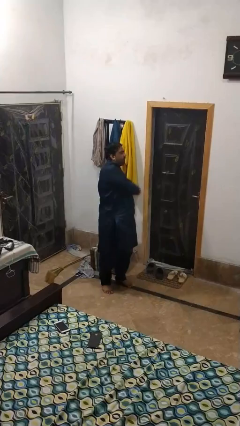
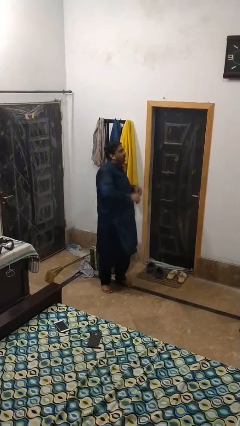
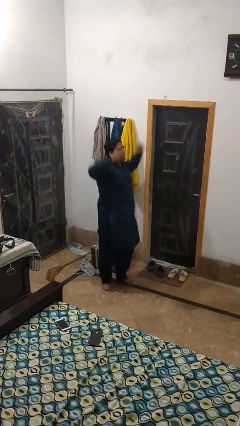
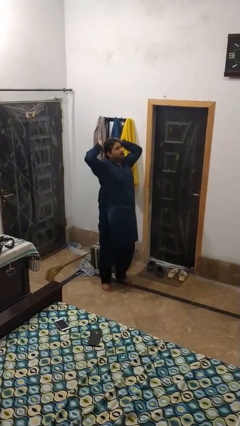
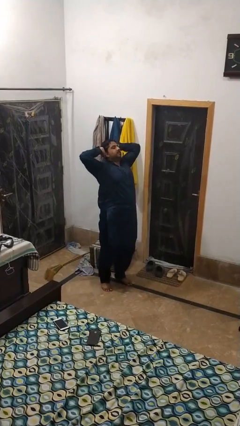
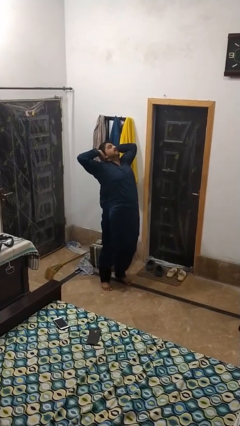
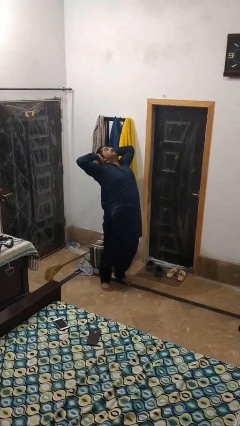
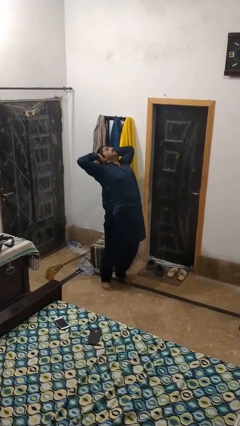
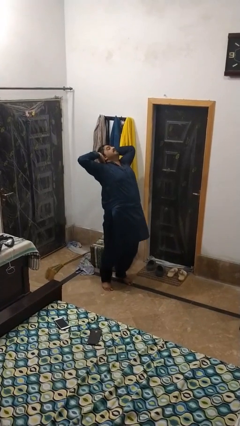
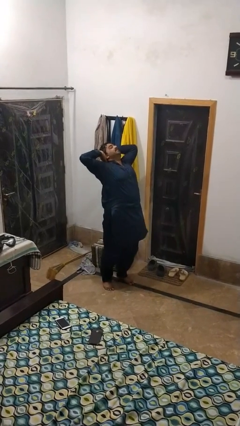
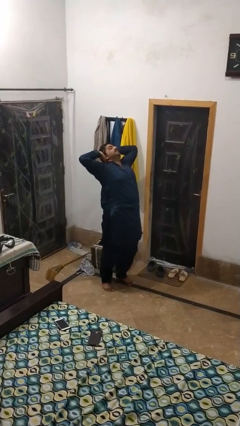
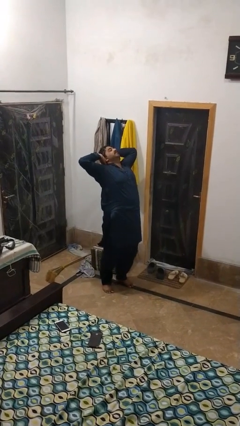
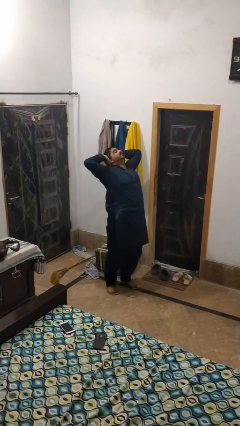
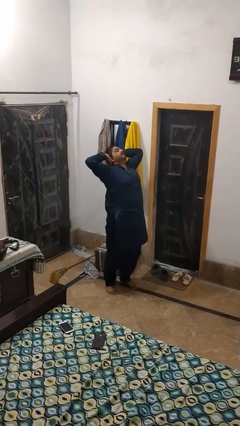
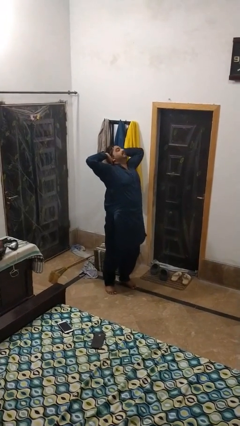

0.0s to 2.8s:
person stretches arms over head

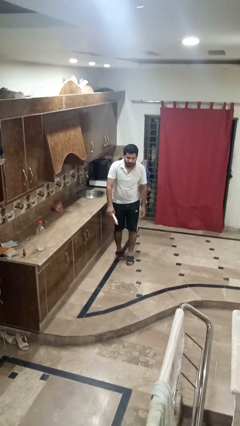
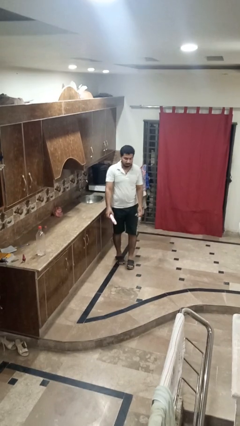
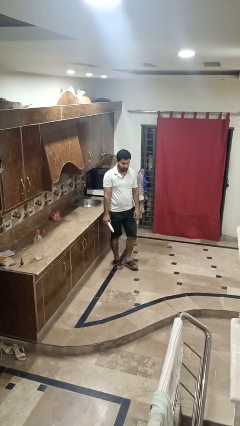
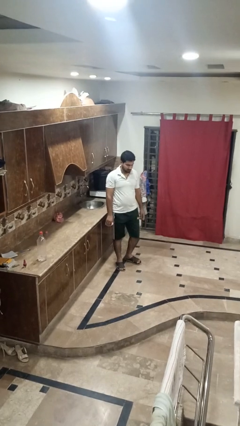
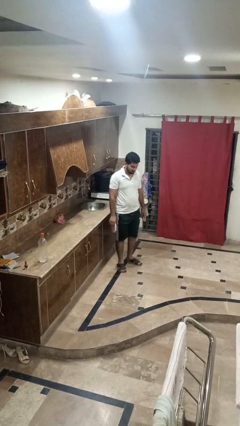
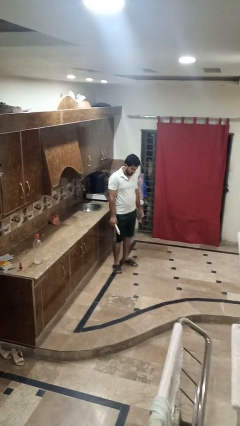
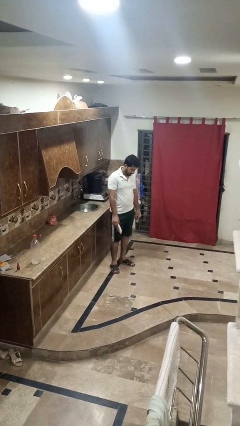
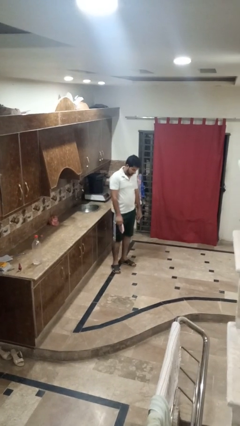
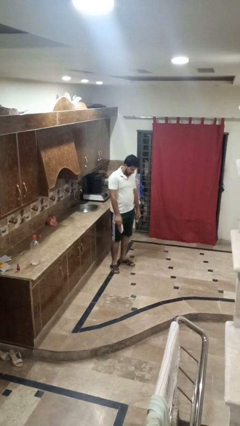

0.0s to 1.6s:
person picks up object from floor

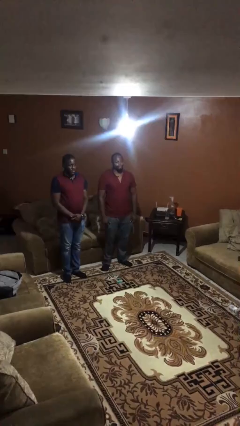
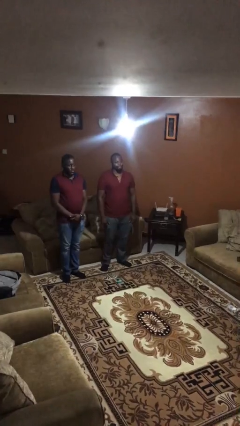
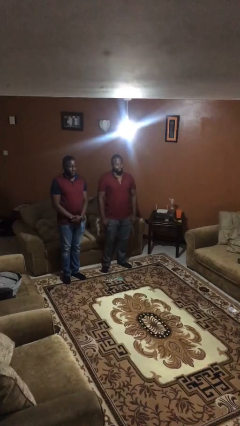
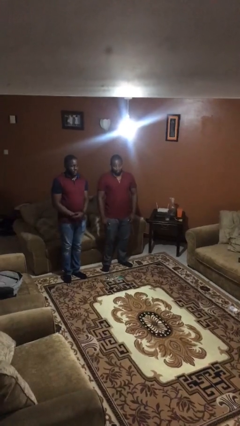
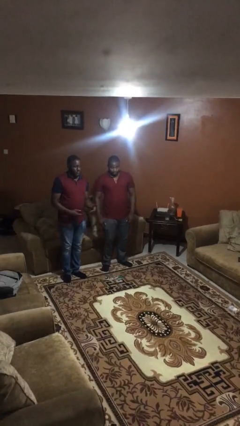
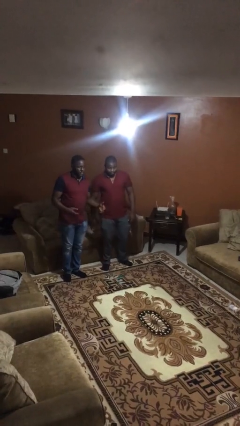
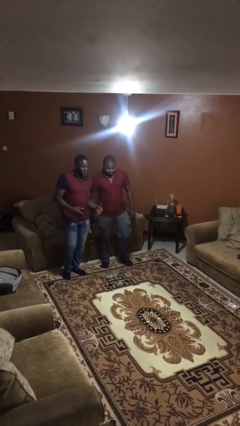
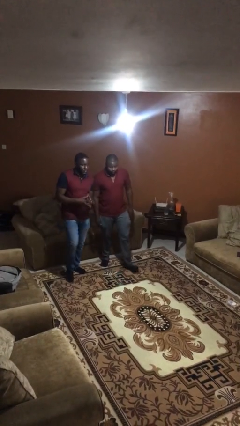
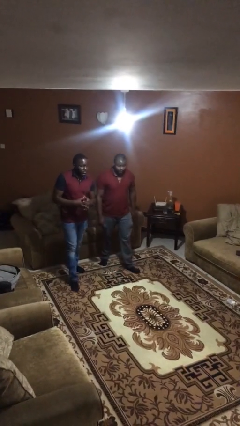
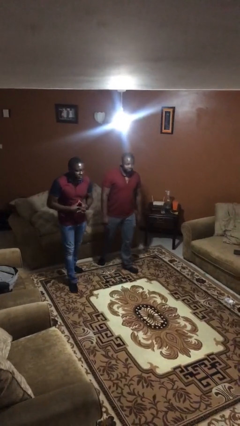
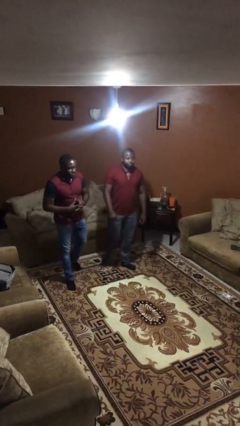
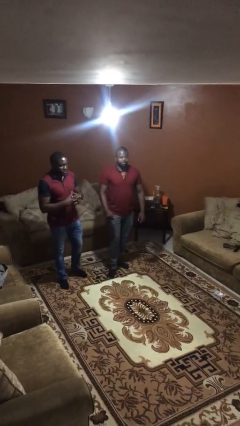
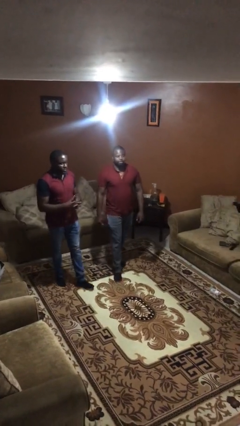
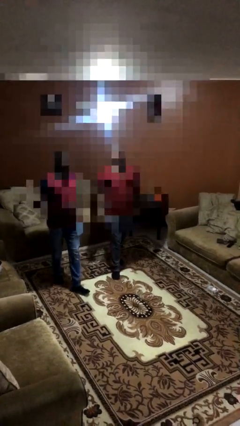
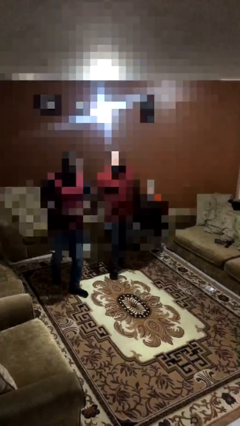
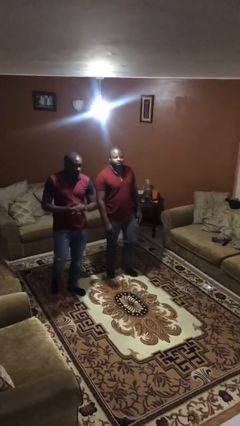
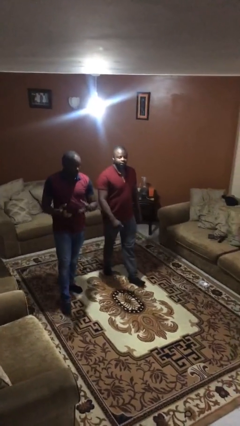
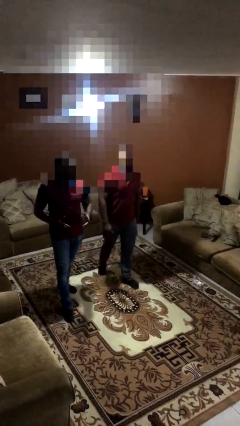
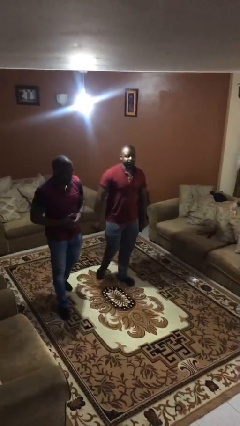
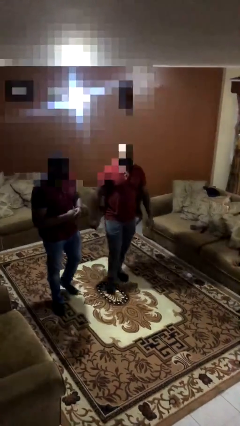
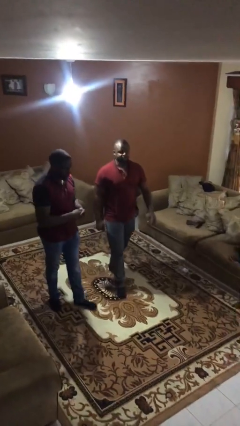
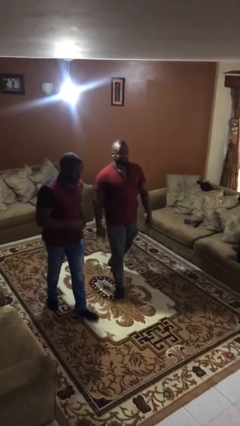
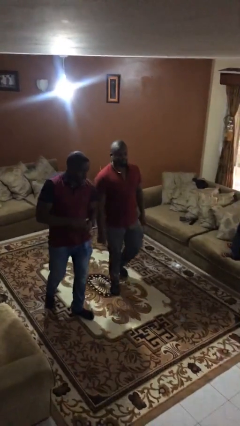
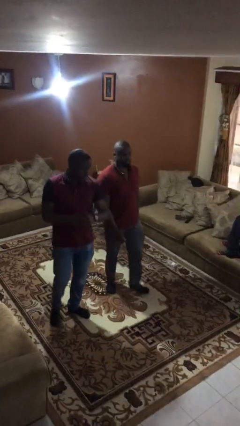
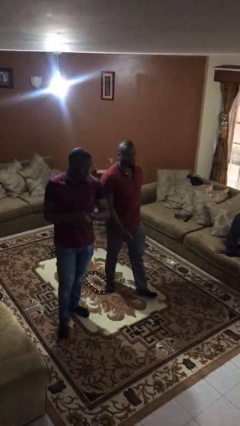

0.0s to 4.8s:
person talks to person

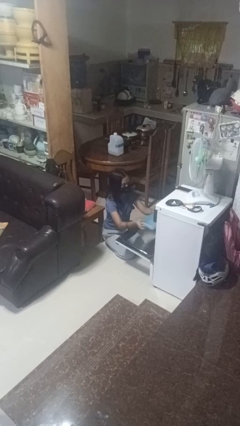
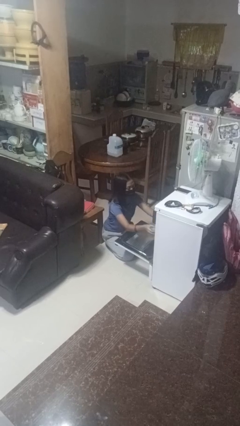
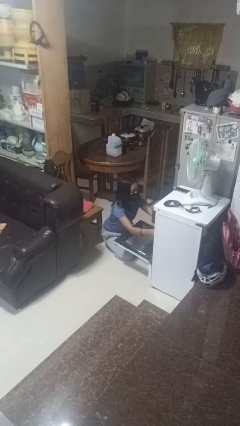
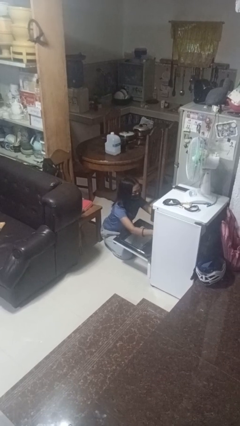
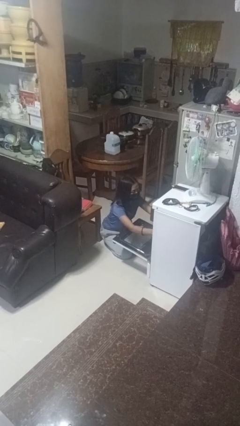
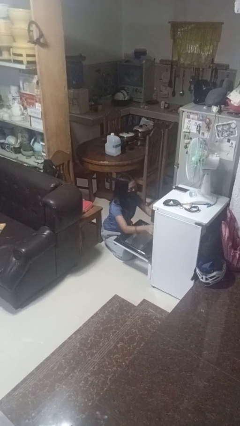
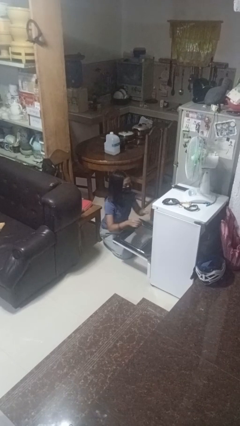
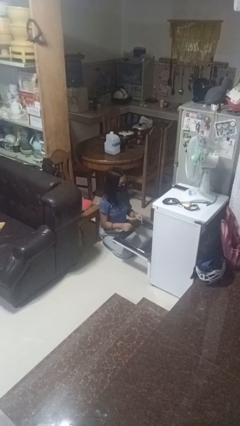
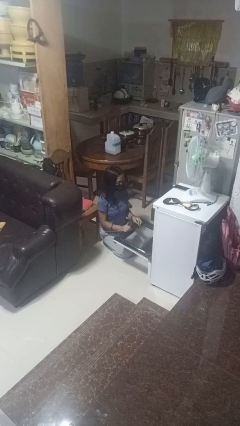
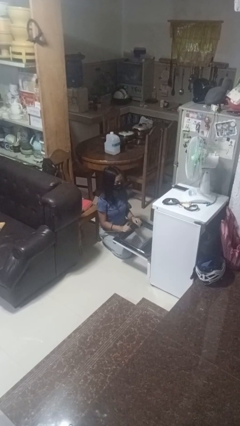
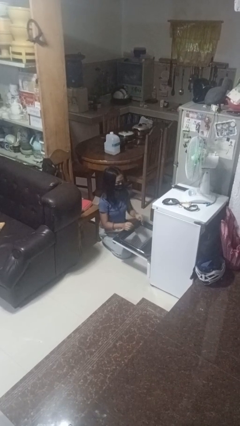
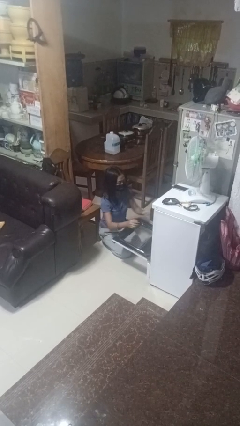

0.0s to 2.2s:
person puts object into oven

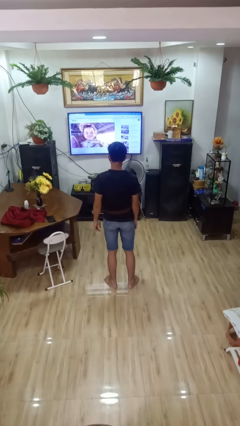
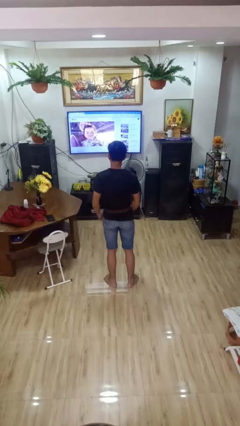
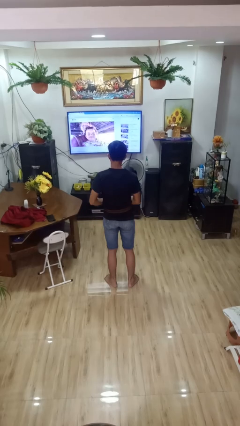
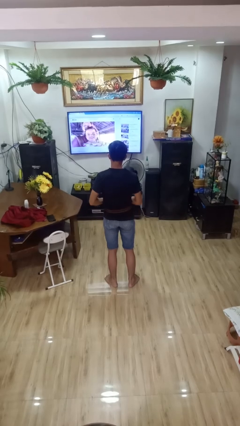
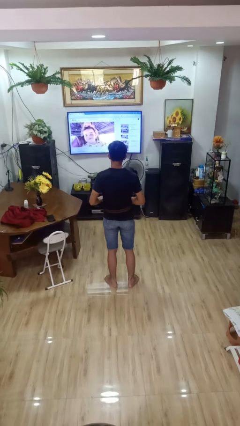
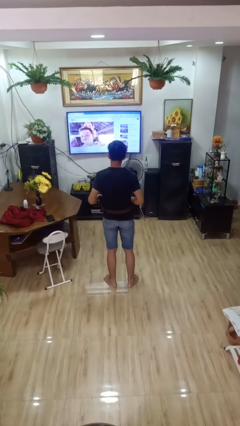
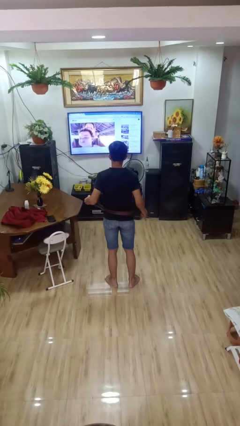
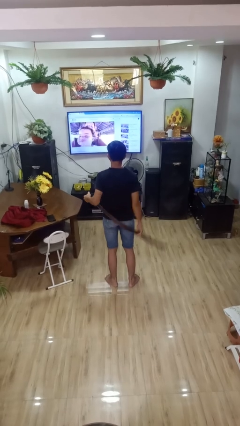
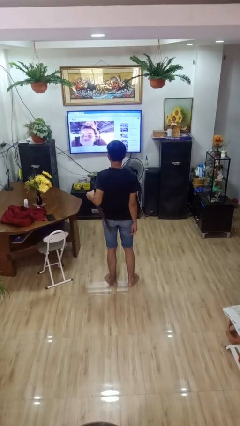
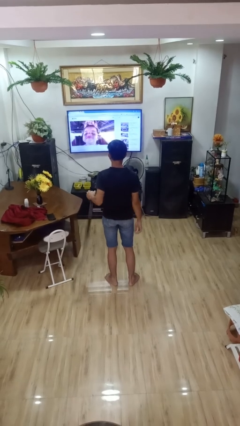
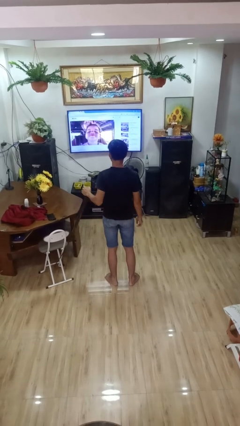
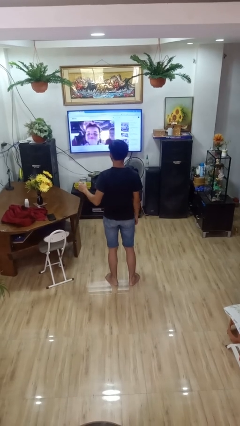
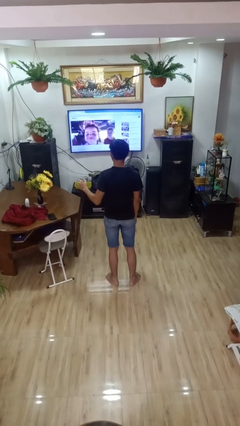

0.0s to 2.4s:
person takes off belt

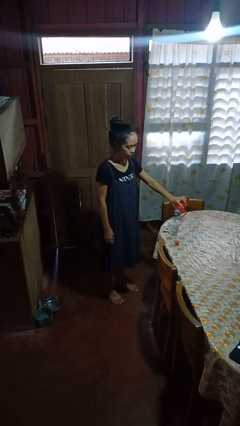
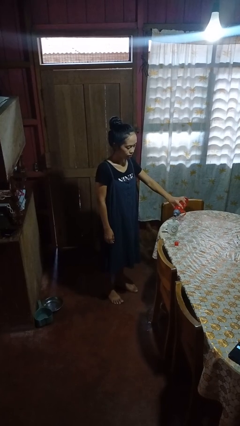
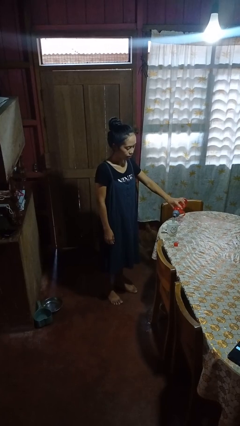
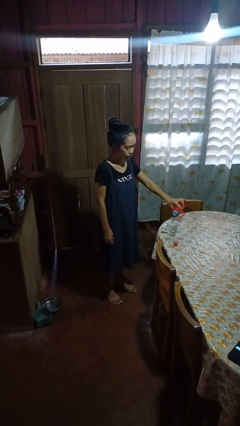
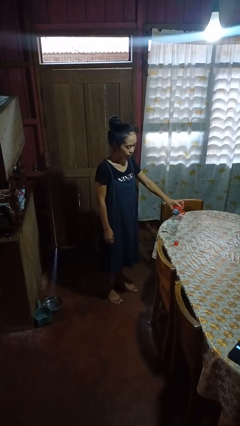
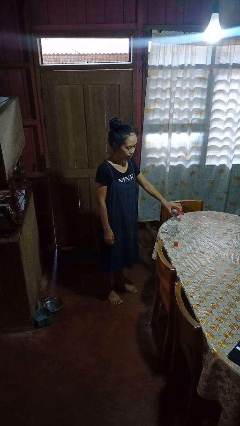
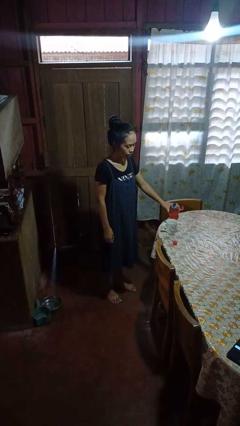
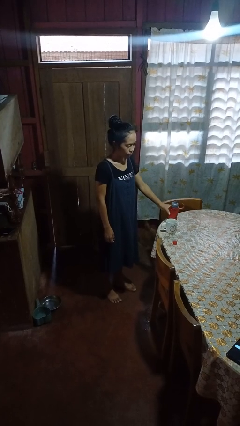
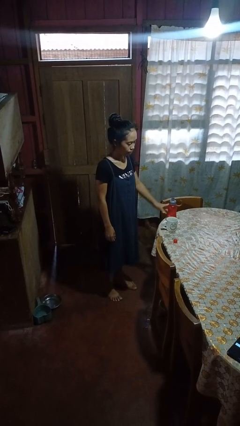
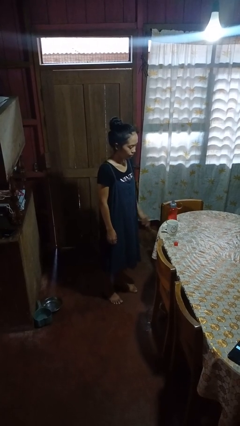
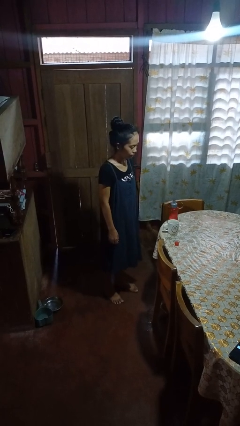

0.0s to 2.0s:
person pours liquid into cup

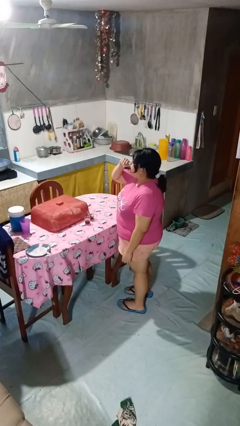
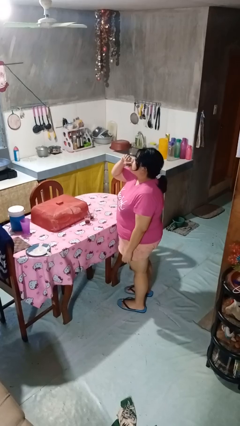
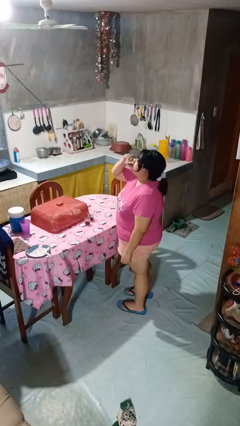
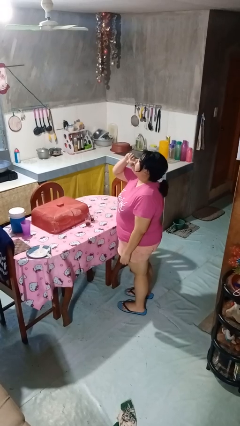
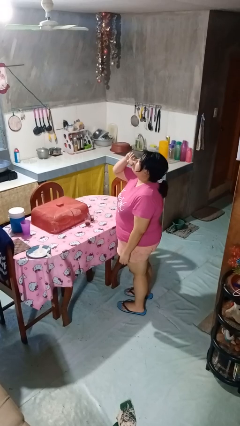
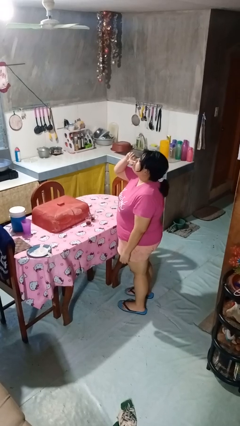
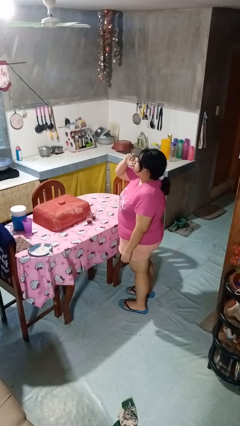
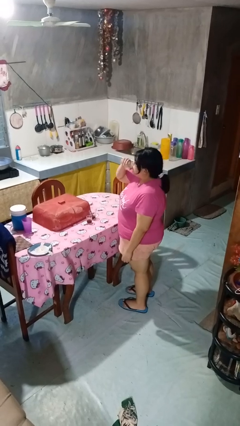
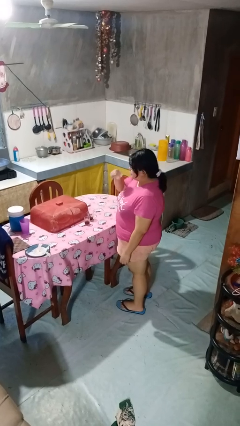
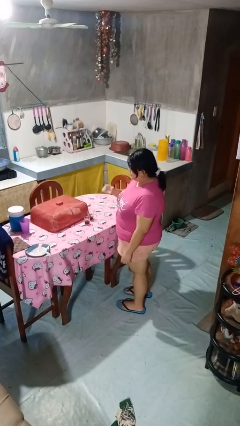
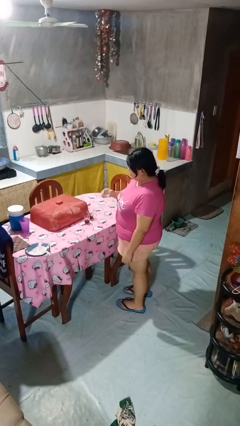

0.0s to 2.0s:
person drinks from shotglass
